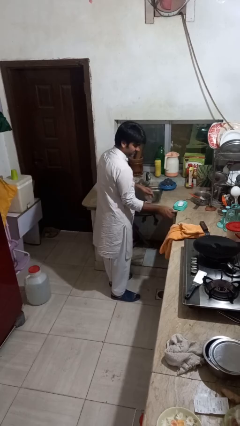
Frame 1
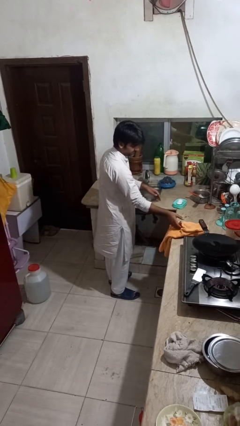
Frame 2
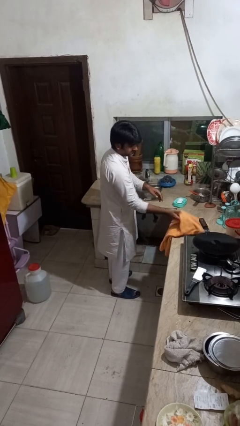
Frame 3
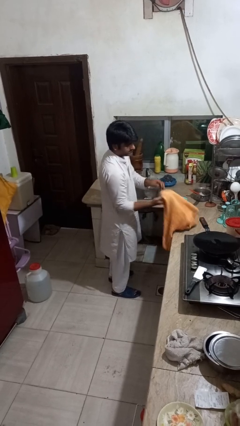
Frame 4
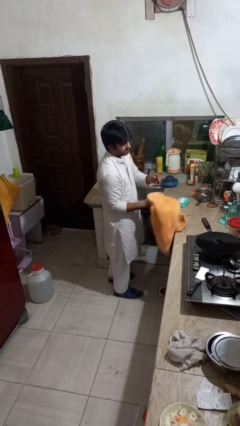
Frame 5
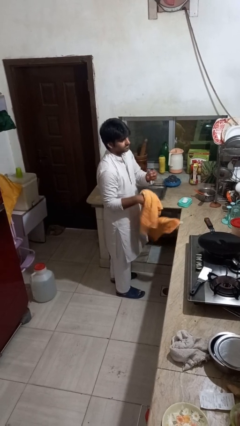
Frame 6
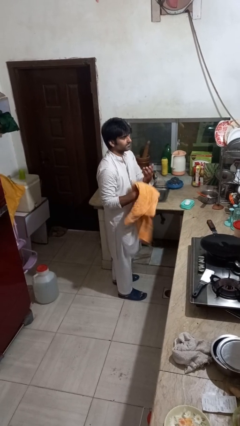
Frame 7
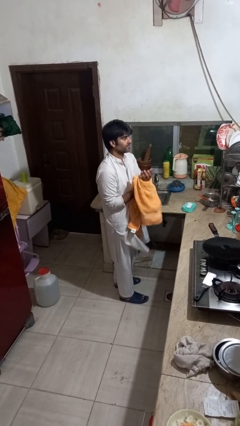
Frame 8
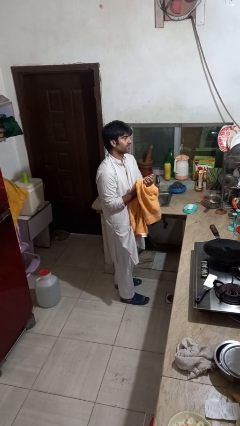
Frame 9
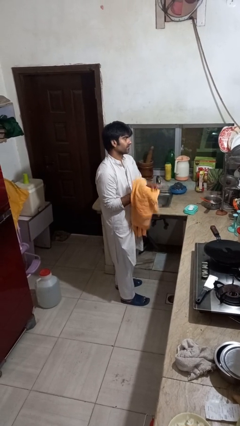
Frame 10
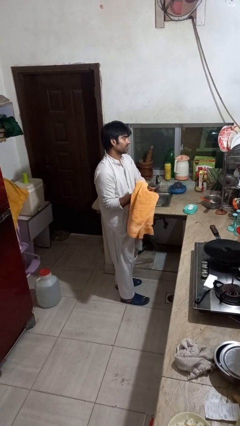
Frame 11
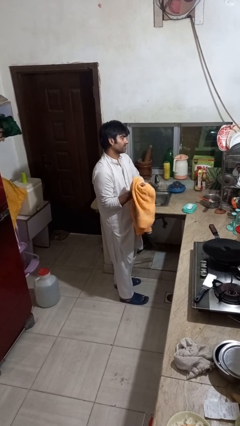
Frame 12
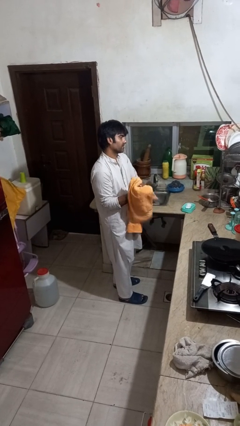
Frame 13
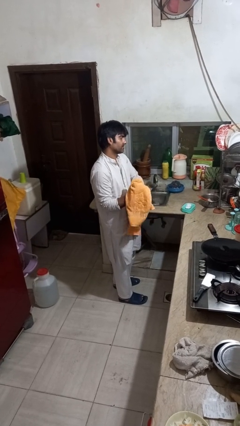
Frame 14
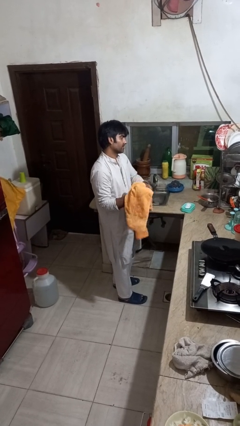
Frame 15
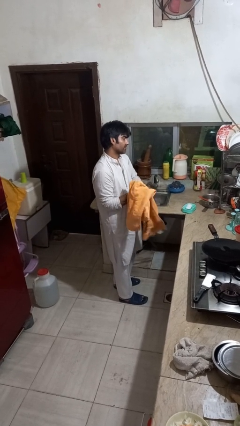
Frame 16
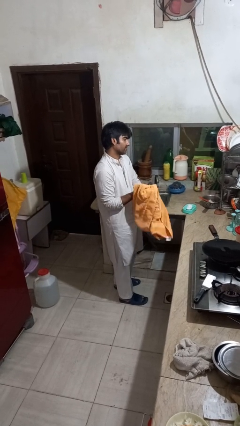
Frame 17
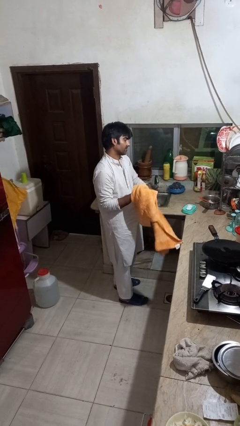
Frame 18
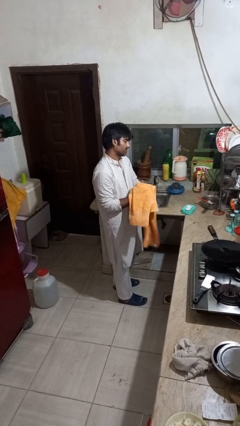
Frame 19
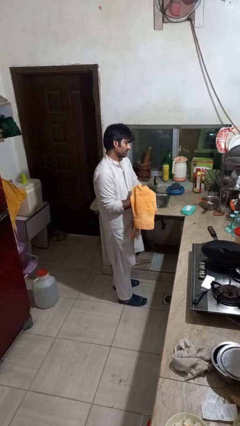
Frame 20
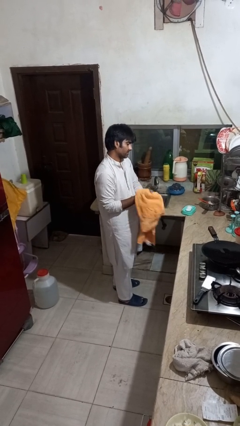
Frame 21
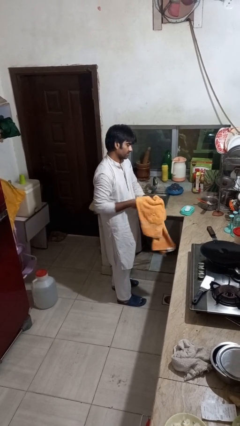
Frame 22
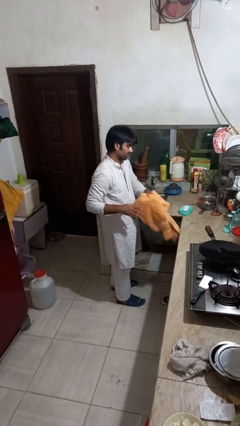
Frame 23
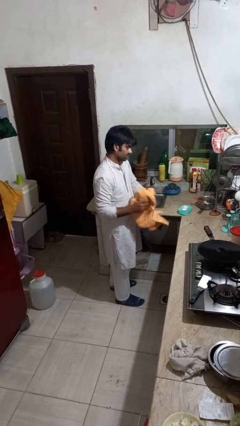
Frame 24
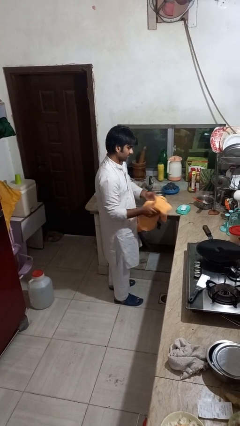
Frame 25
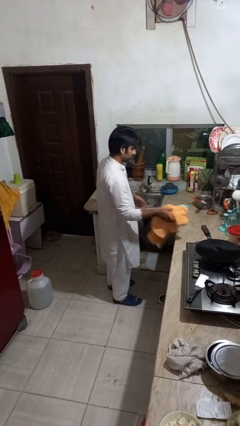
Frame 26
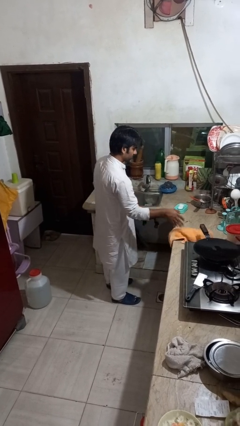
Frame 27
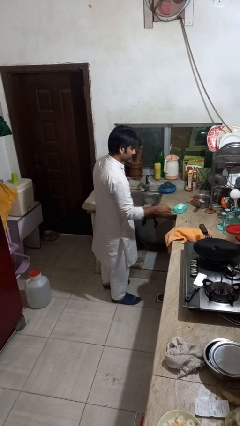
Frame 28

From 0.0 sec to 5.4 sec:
person dries hands with towel

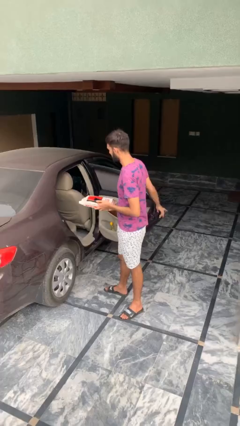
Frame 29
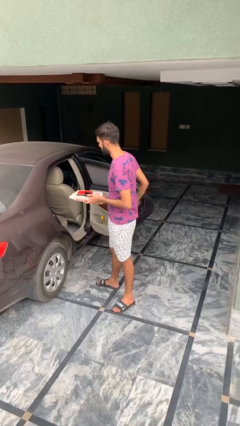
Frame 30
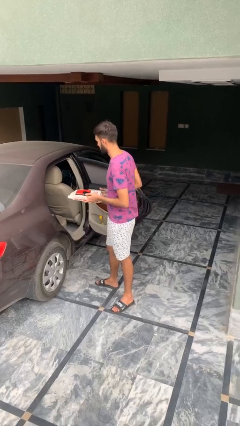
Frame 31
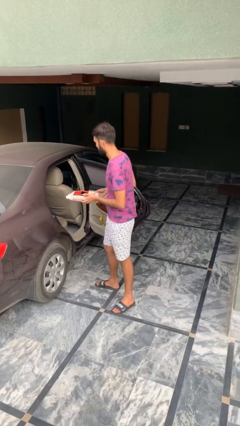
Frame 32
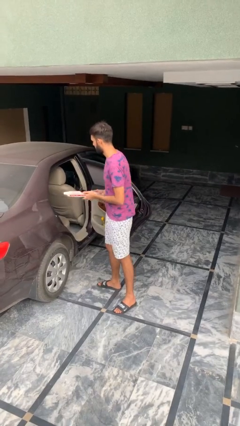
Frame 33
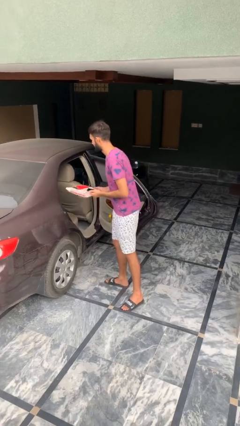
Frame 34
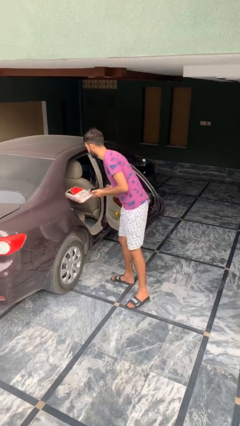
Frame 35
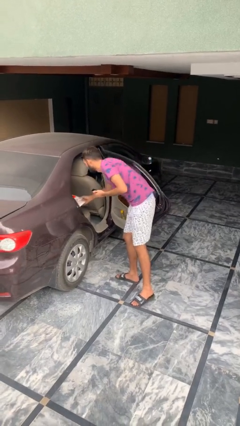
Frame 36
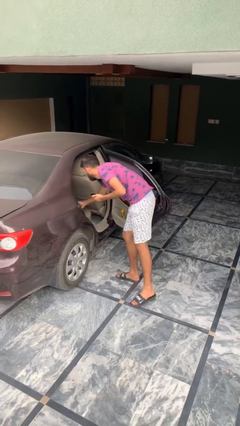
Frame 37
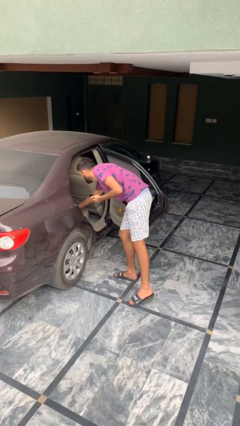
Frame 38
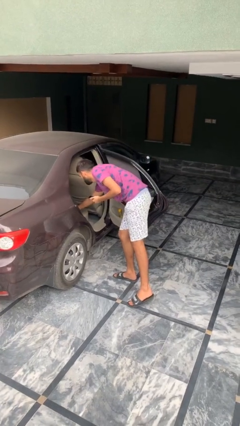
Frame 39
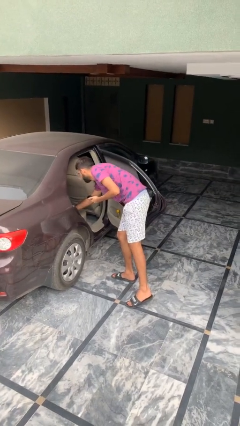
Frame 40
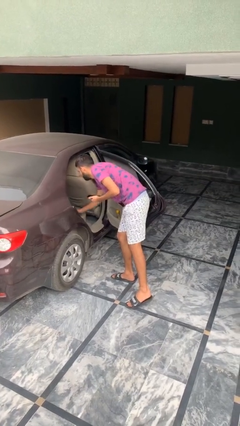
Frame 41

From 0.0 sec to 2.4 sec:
person loads car

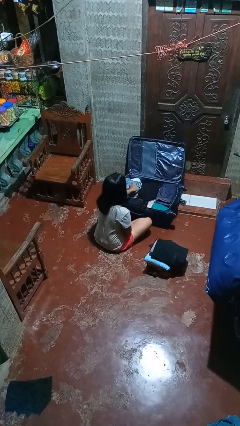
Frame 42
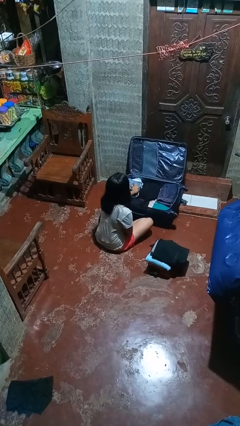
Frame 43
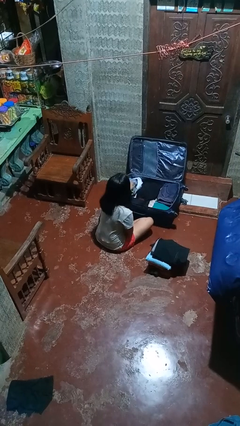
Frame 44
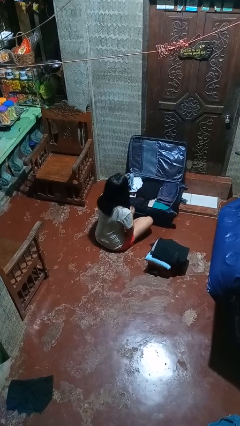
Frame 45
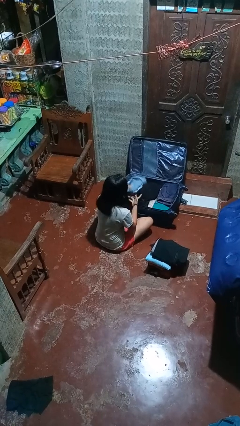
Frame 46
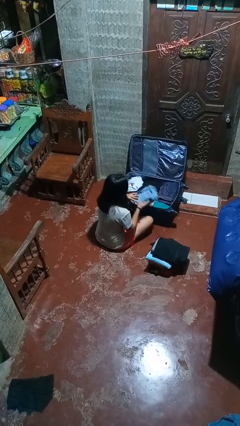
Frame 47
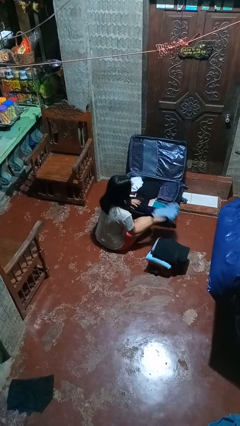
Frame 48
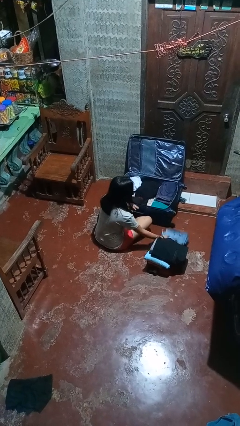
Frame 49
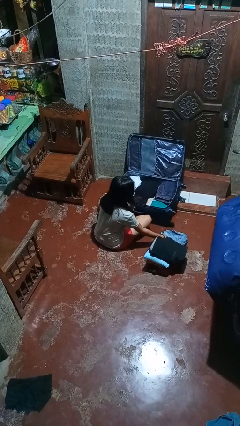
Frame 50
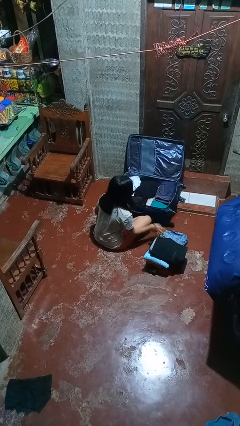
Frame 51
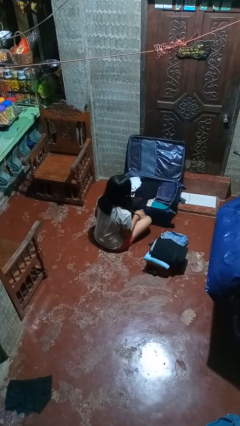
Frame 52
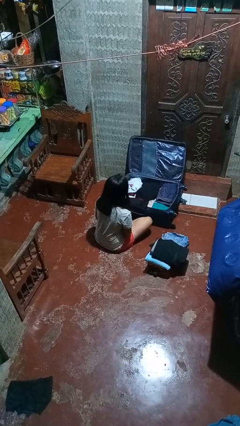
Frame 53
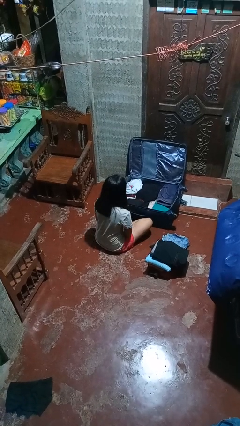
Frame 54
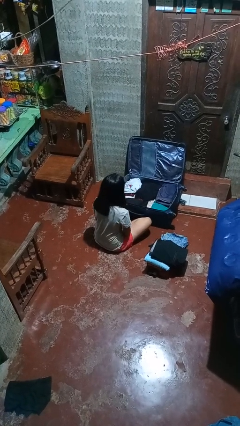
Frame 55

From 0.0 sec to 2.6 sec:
person unloads clothes from suitcase

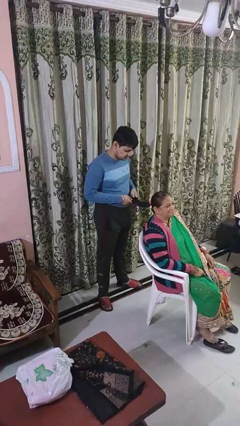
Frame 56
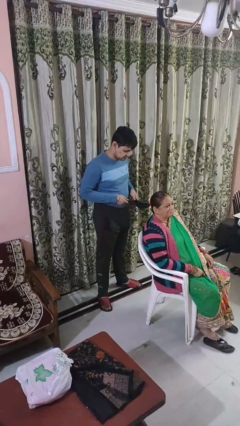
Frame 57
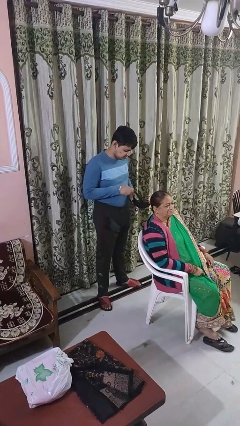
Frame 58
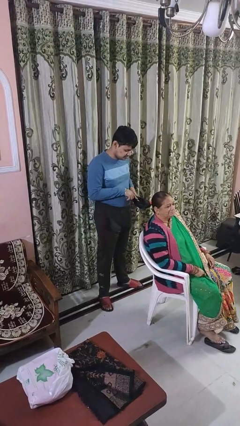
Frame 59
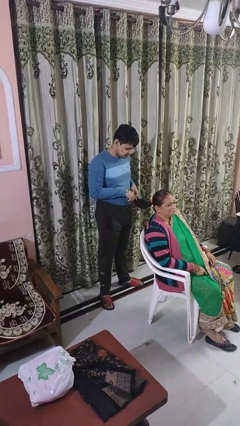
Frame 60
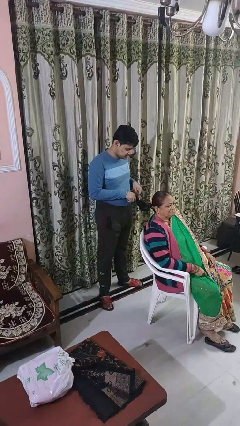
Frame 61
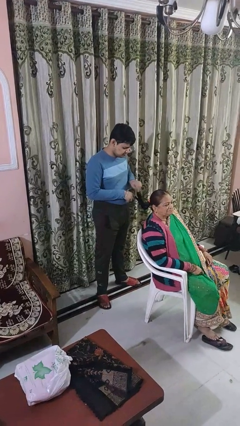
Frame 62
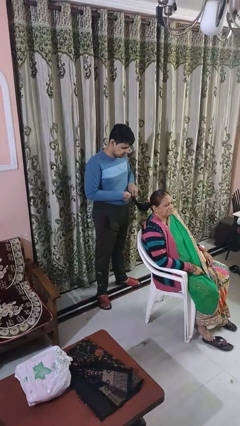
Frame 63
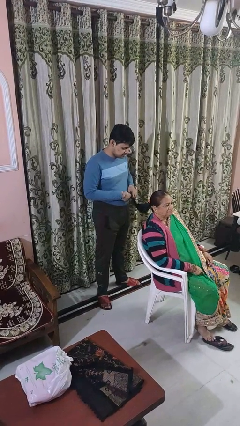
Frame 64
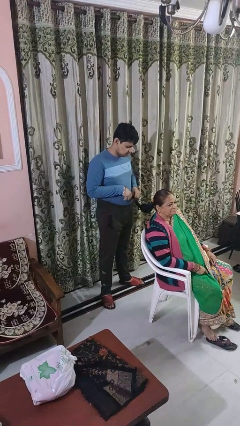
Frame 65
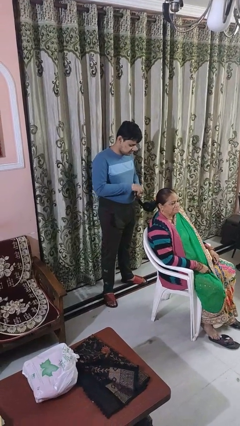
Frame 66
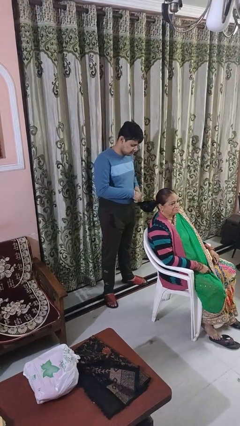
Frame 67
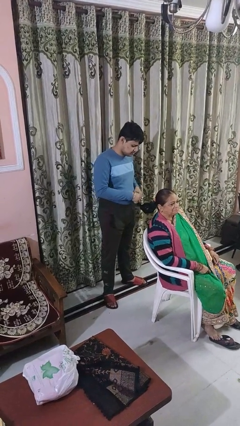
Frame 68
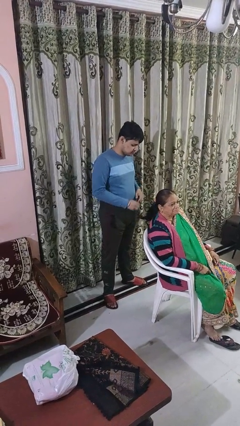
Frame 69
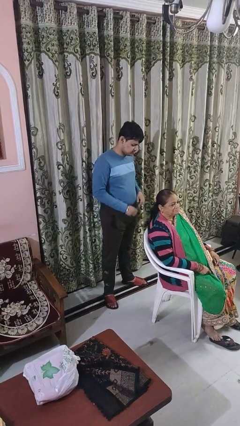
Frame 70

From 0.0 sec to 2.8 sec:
person braids hair of person

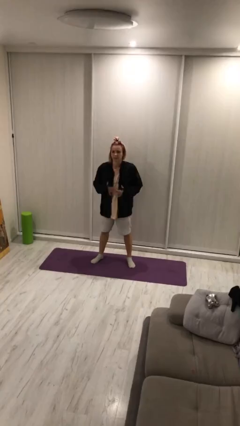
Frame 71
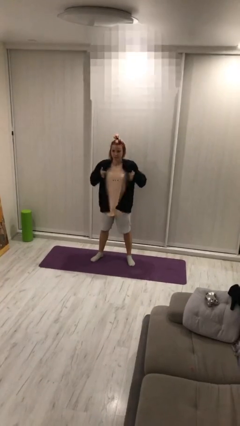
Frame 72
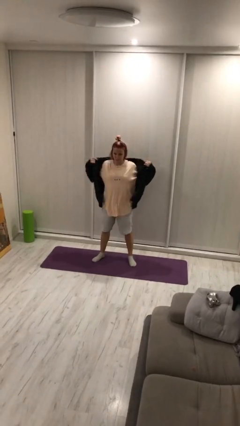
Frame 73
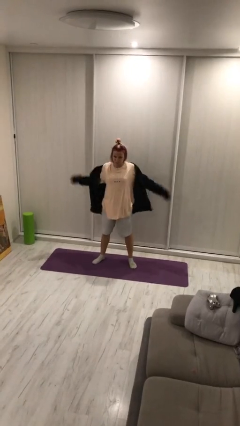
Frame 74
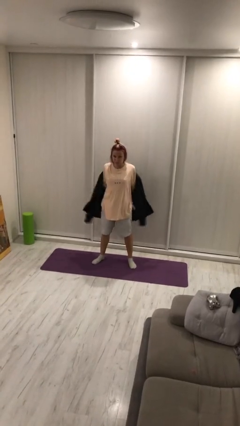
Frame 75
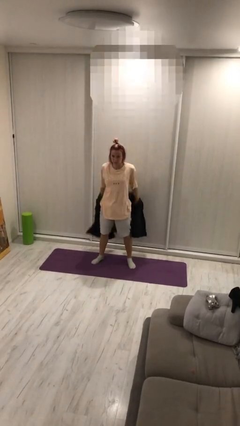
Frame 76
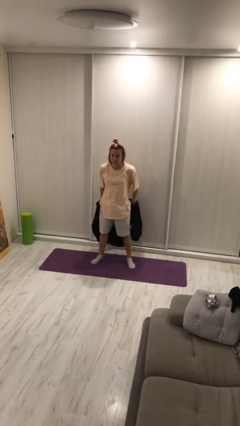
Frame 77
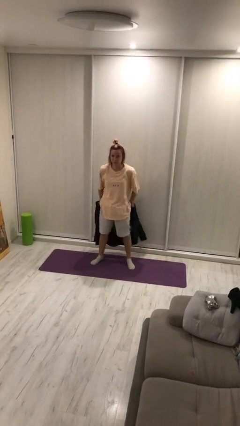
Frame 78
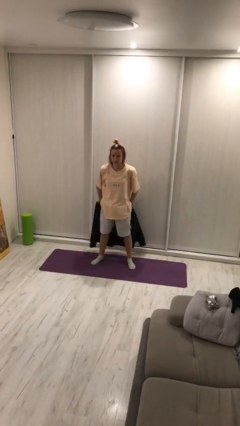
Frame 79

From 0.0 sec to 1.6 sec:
person takes off jacket

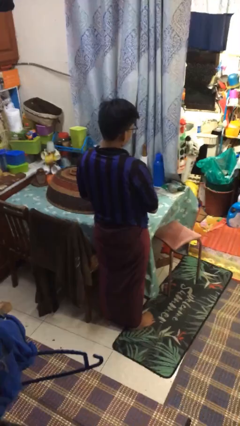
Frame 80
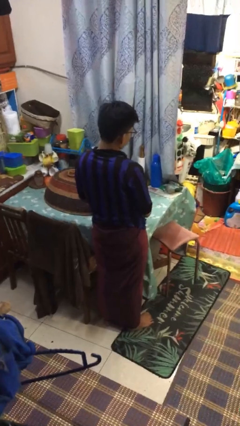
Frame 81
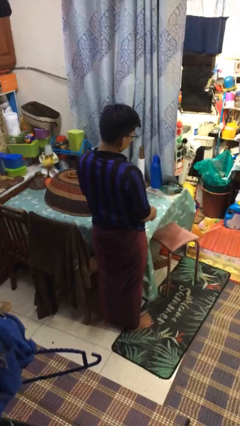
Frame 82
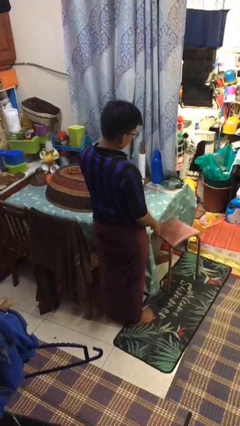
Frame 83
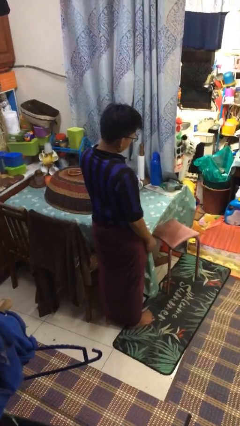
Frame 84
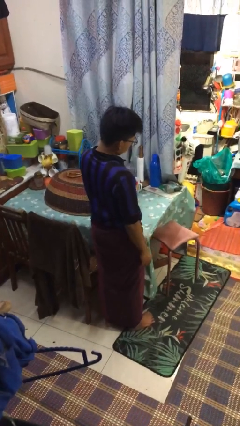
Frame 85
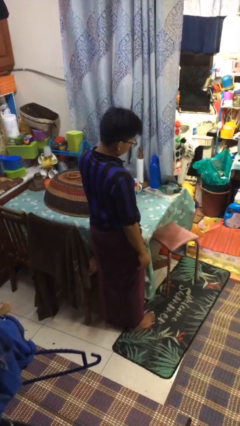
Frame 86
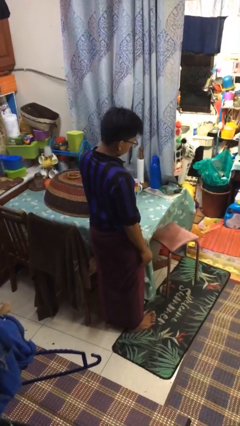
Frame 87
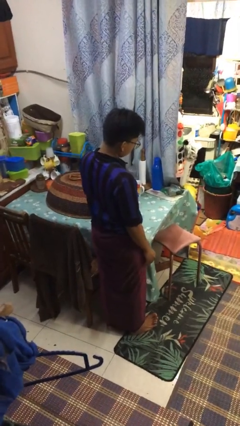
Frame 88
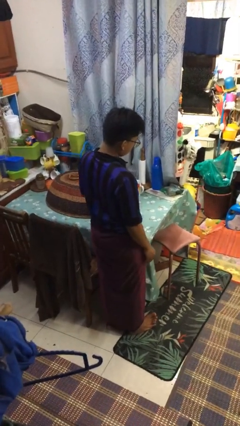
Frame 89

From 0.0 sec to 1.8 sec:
person sprays from bottle

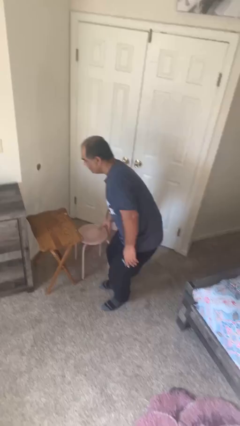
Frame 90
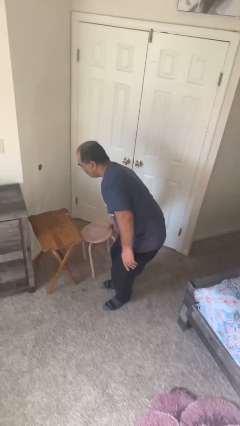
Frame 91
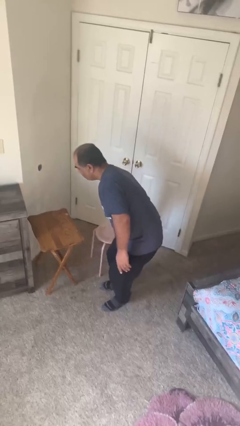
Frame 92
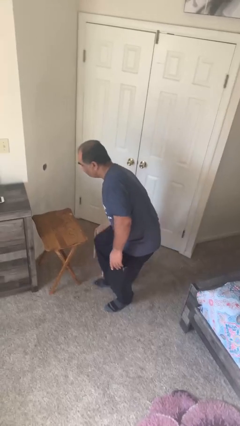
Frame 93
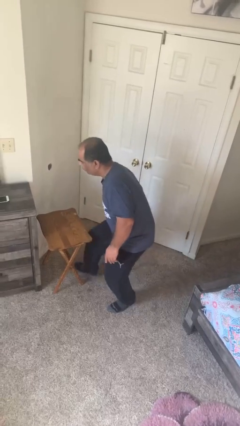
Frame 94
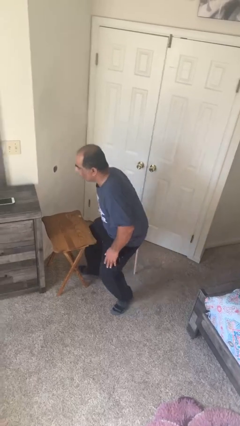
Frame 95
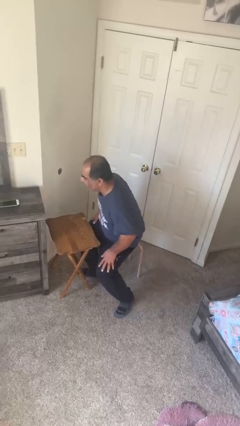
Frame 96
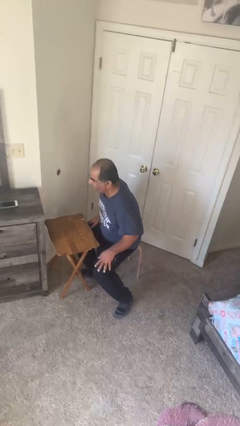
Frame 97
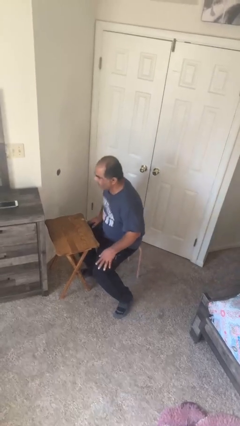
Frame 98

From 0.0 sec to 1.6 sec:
person sits down
